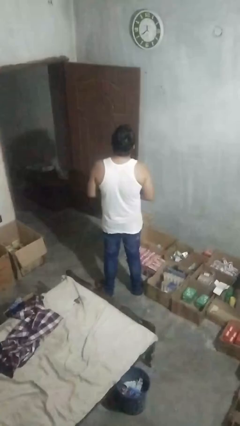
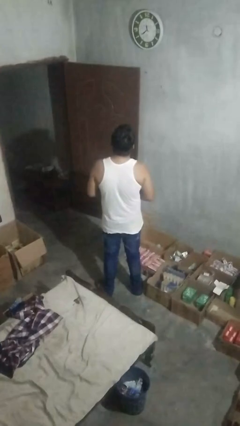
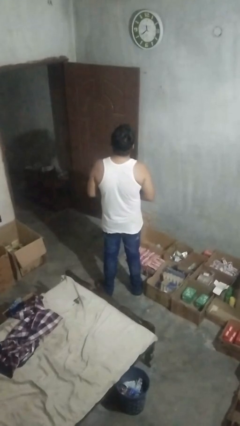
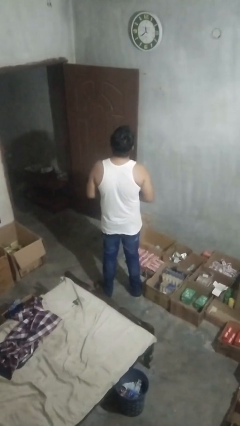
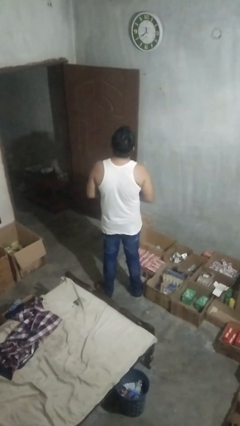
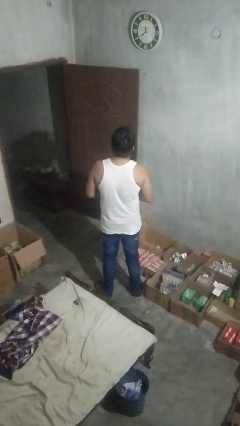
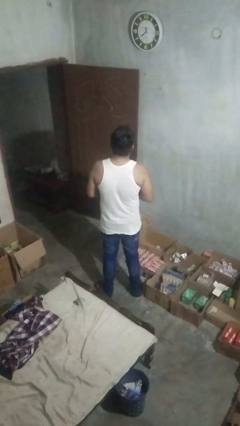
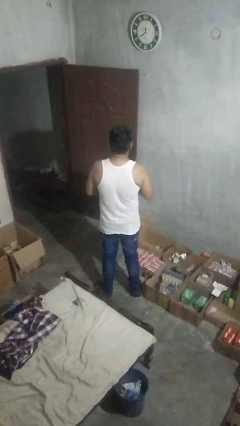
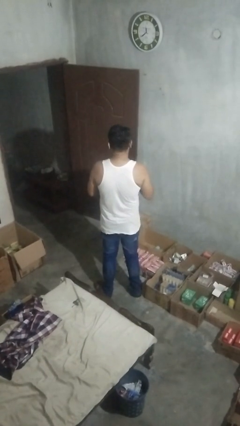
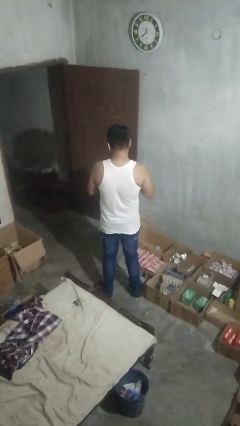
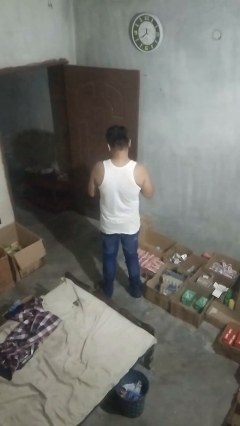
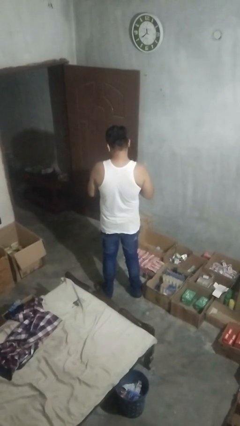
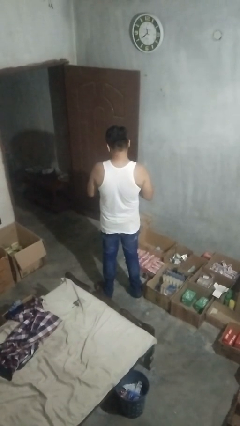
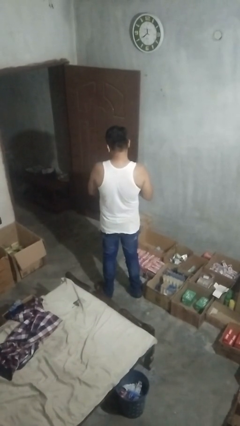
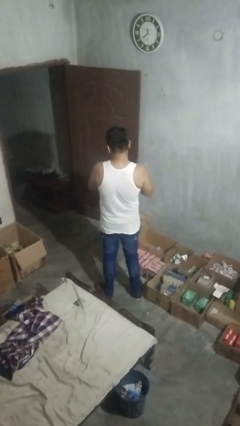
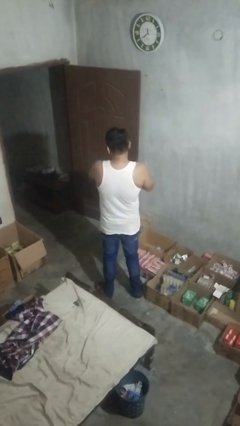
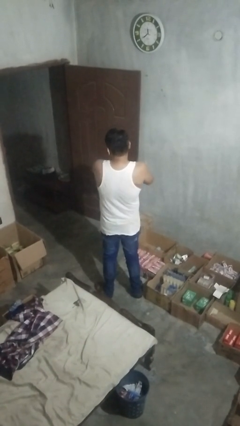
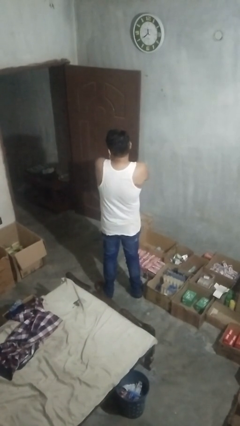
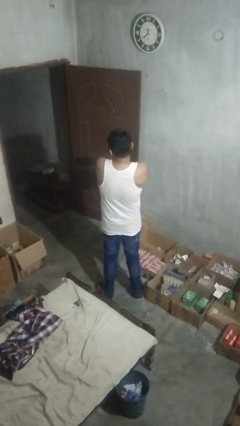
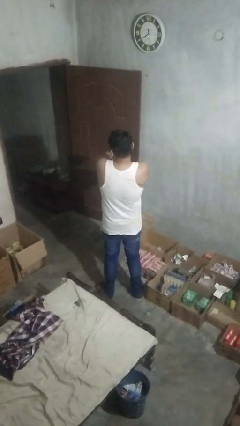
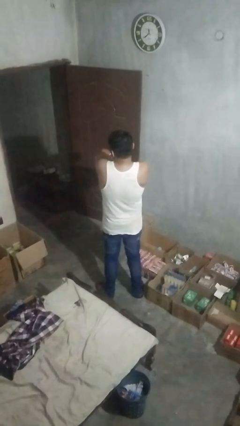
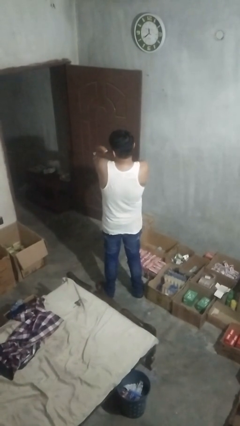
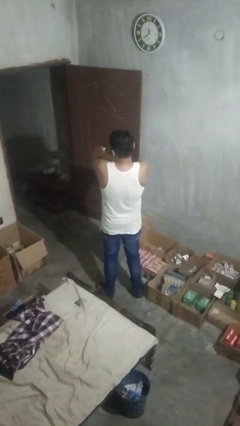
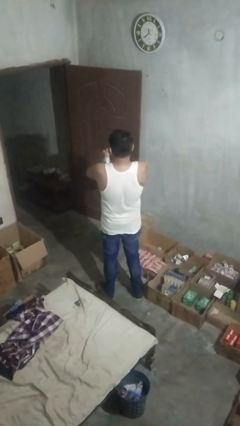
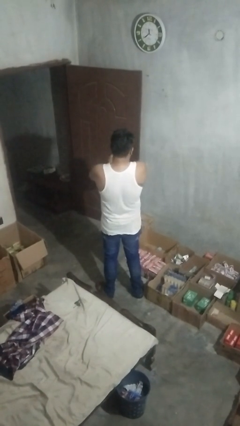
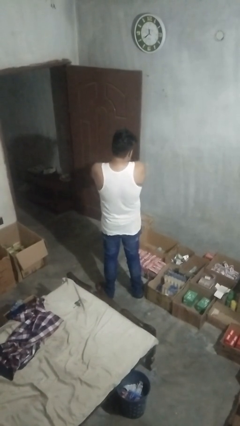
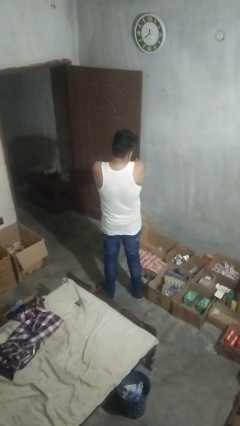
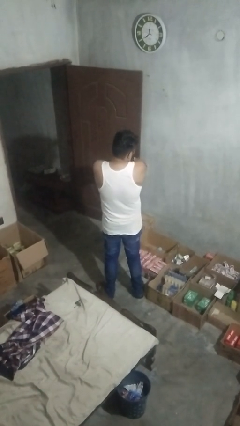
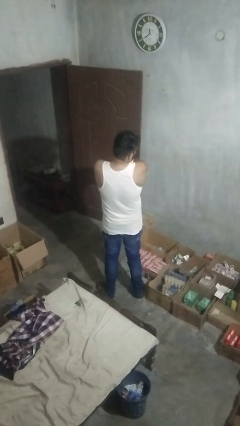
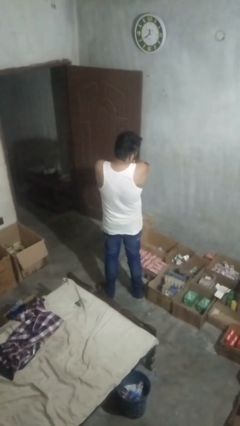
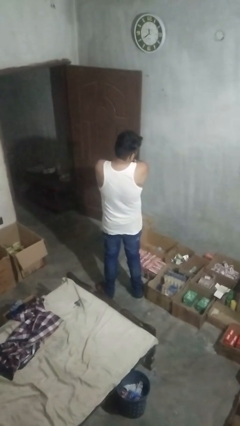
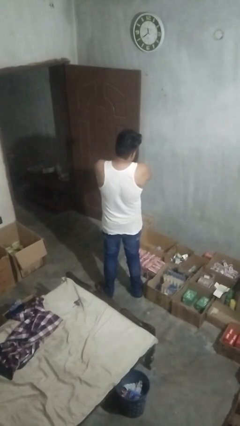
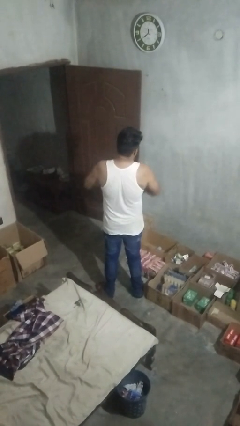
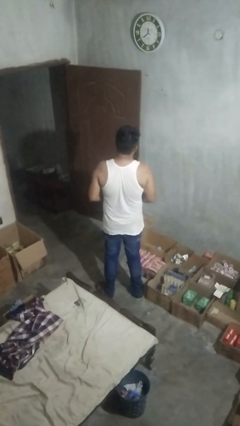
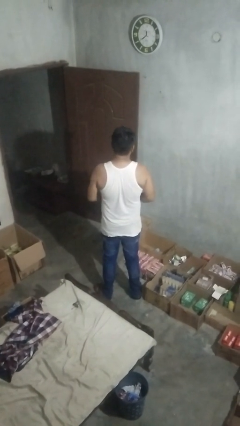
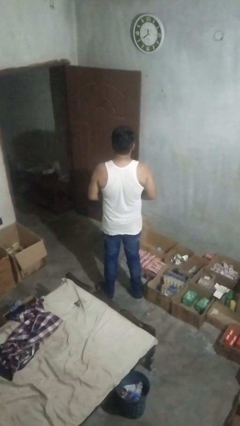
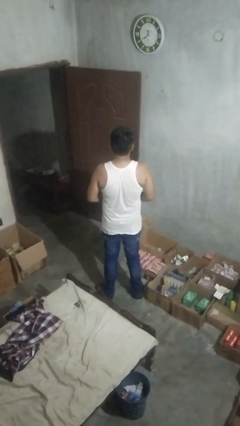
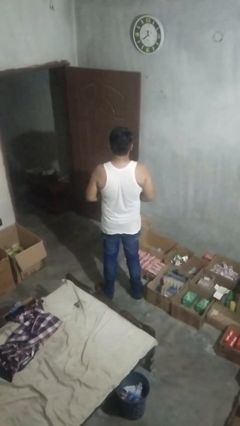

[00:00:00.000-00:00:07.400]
person applies sunscreen

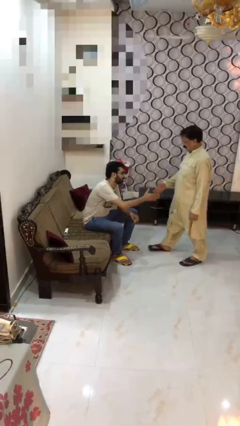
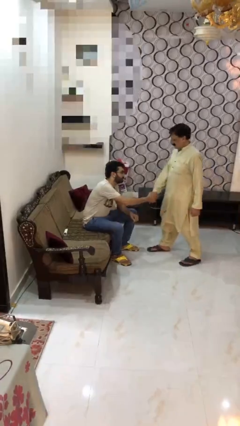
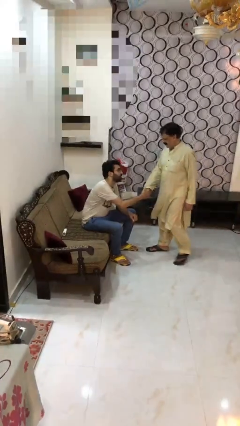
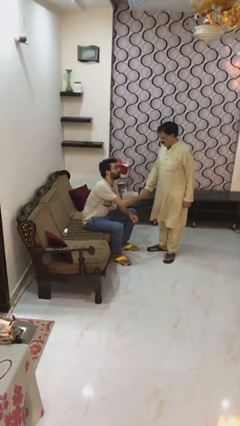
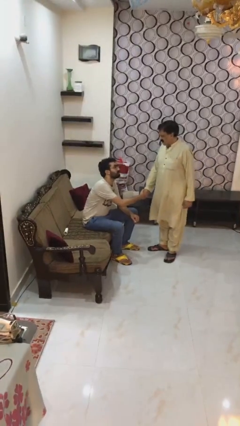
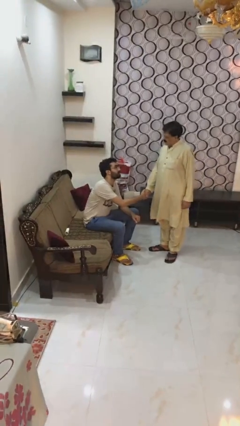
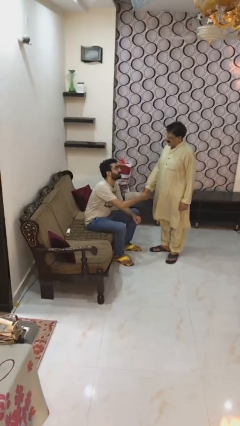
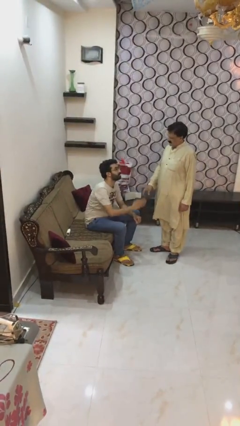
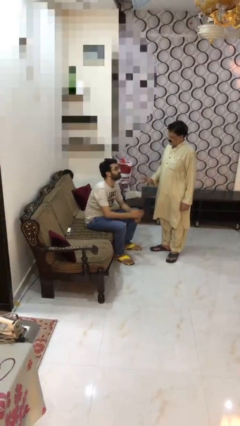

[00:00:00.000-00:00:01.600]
person shakes hand

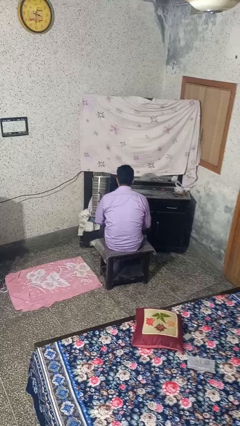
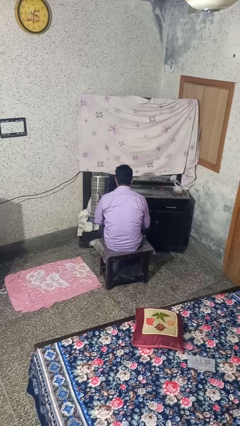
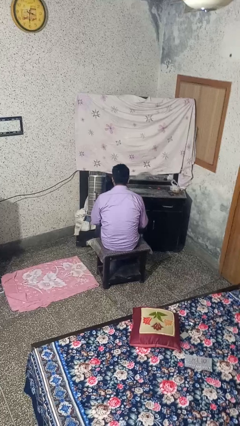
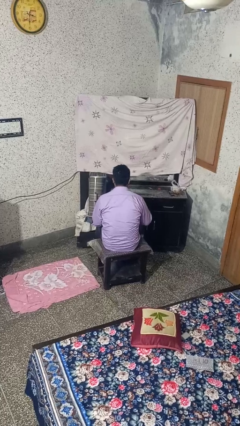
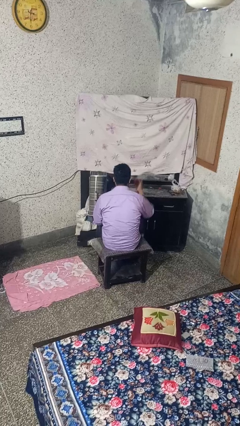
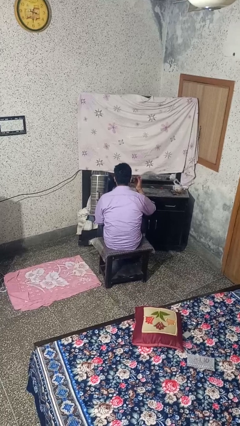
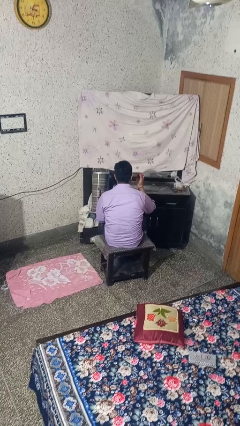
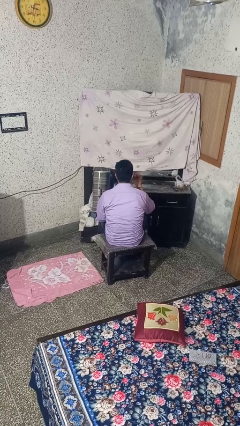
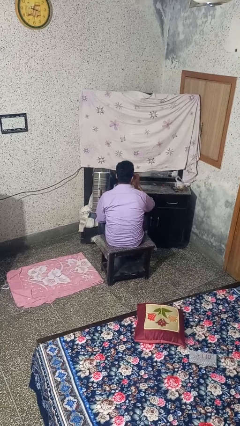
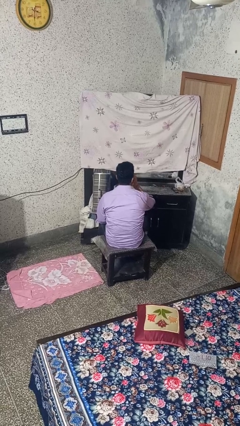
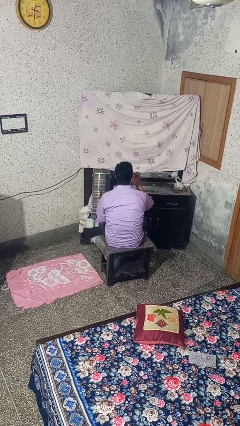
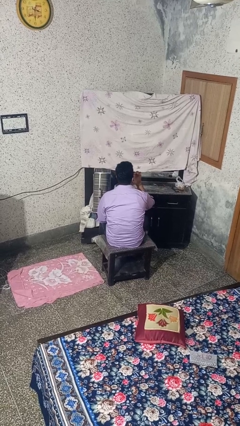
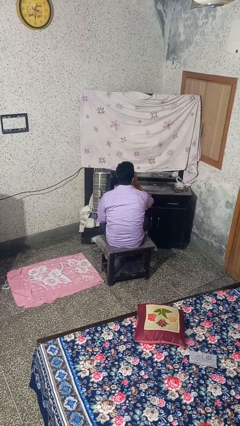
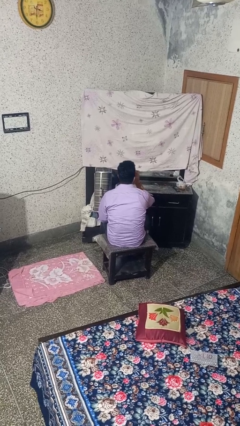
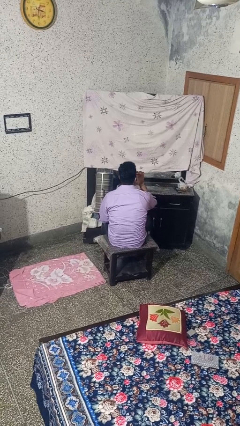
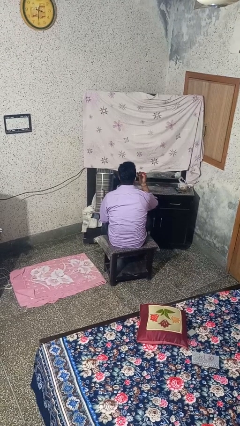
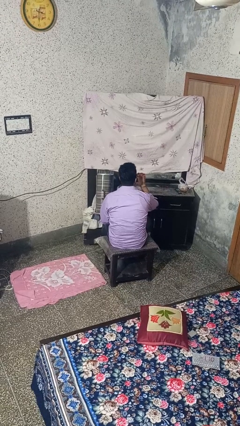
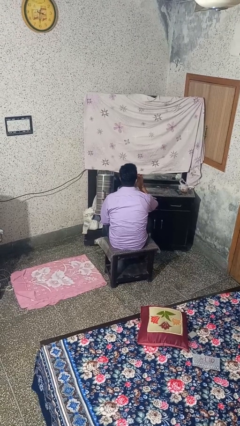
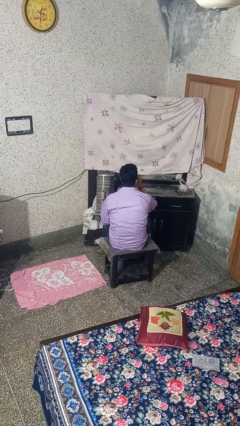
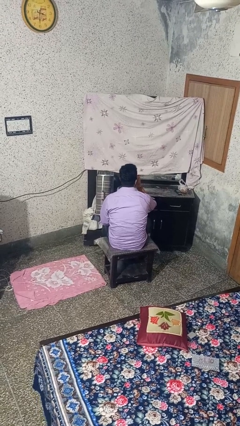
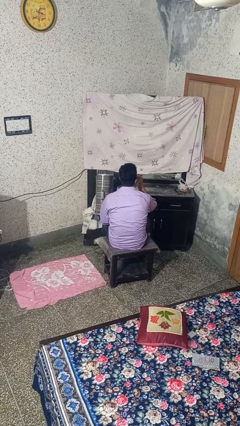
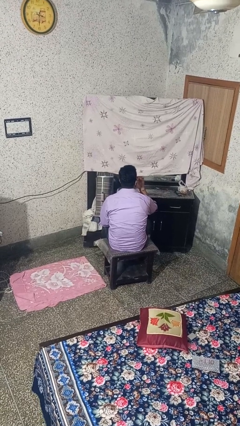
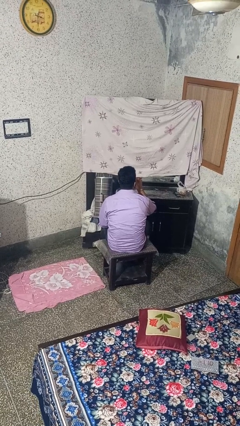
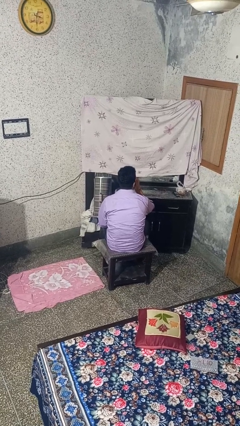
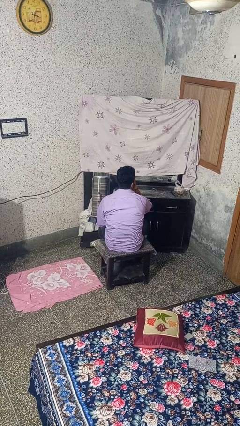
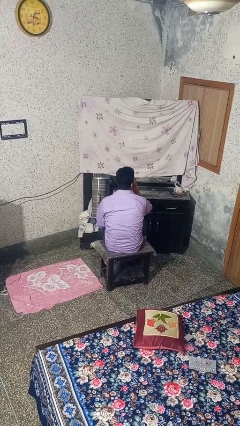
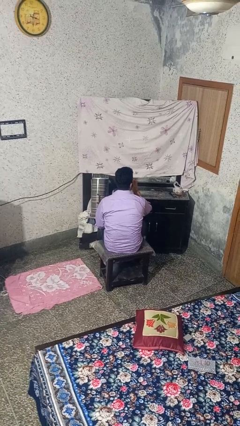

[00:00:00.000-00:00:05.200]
person applies lip makeup

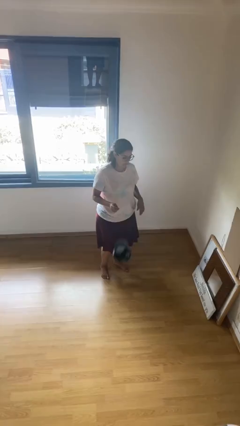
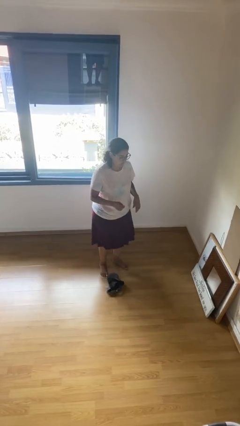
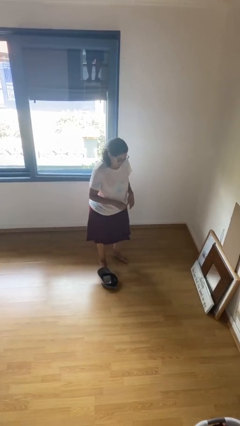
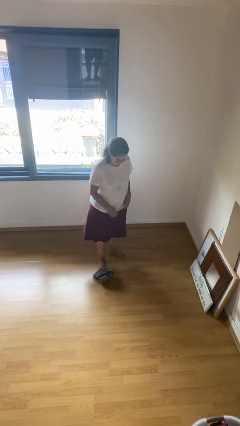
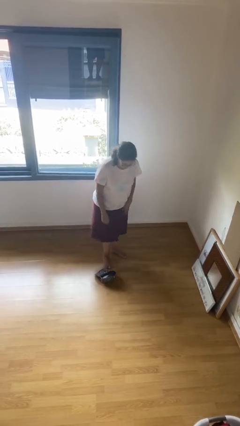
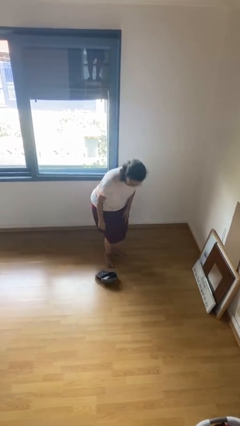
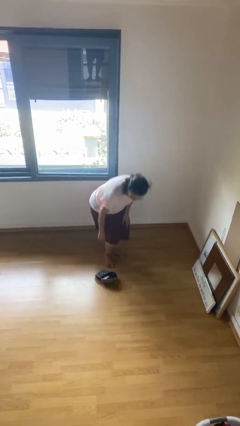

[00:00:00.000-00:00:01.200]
person drops object

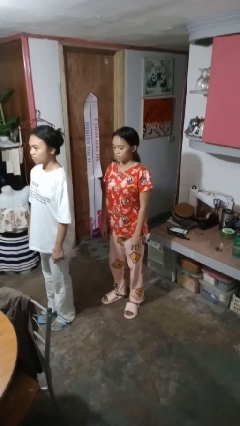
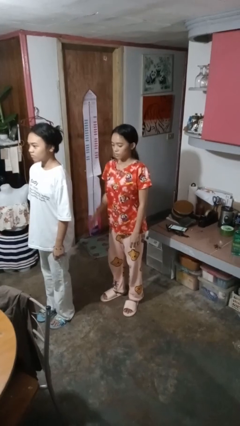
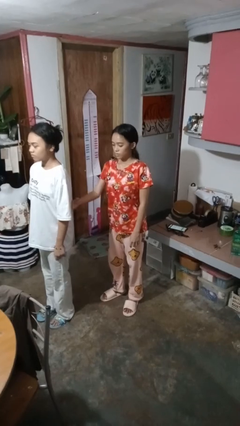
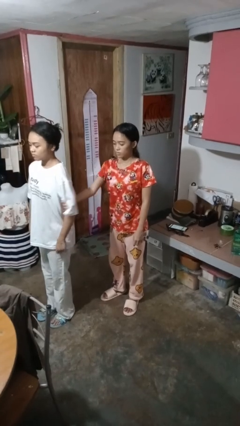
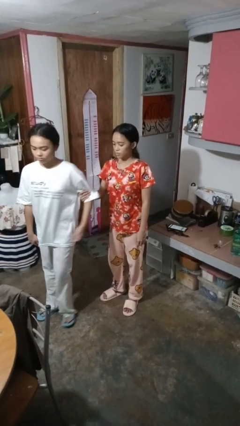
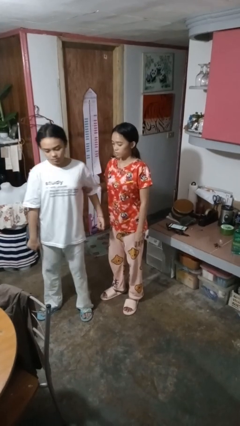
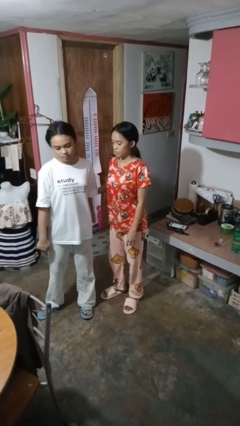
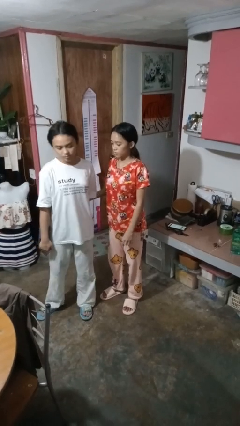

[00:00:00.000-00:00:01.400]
person grabs person by bicep

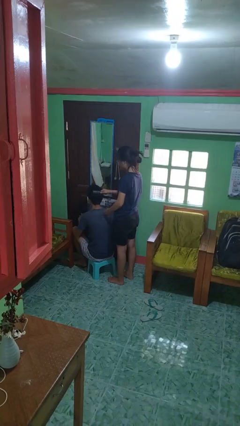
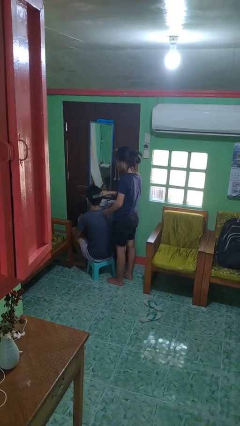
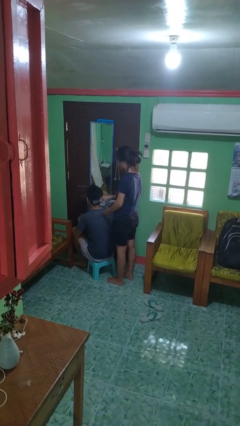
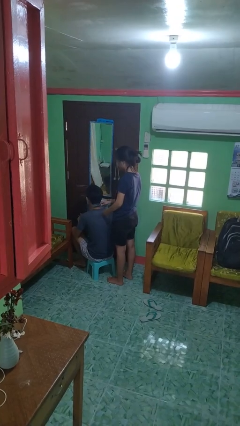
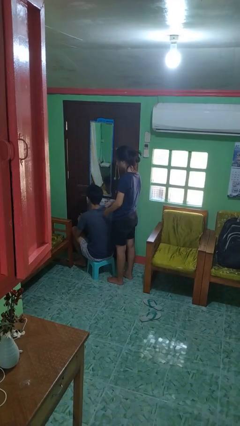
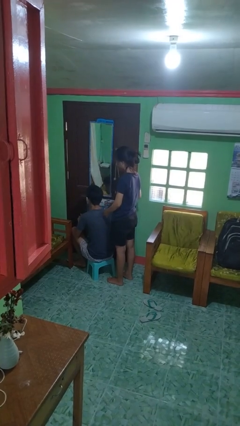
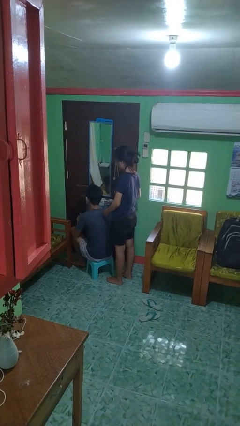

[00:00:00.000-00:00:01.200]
person brushes hair of person
